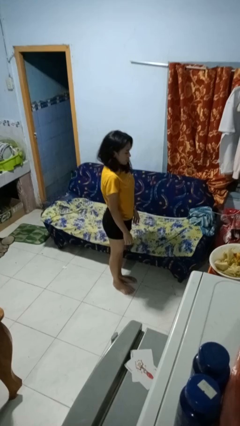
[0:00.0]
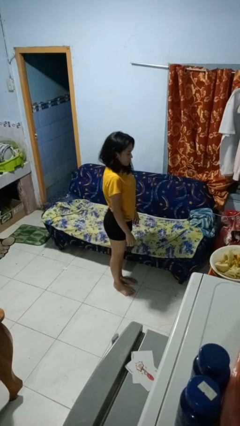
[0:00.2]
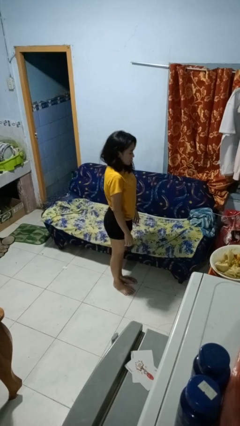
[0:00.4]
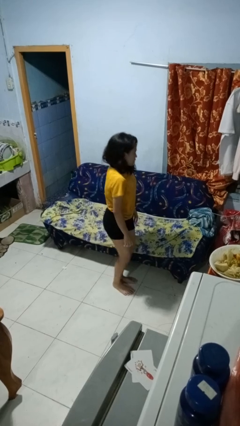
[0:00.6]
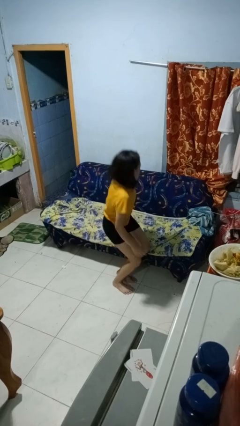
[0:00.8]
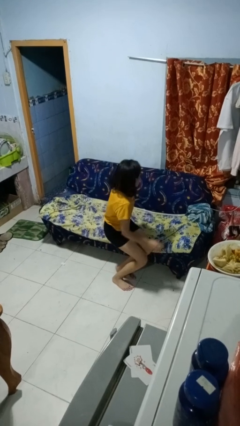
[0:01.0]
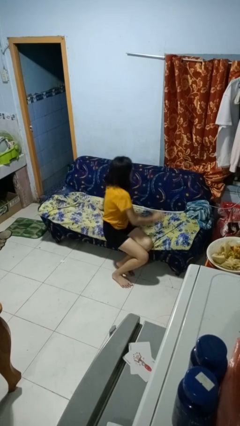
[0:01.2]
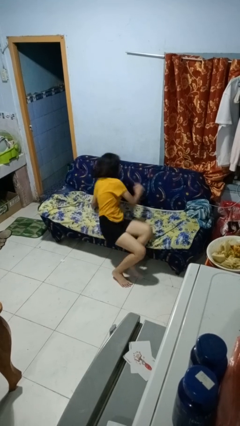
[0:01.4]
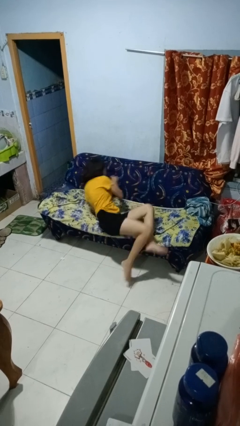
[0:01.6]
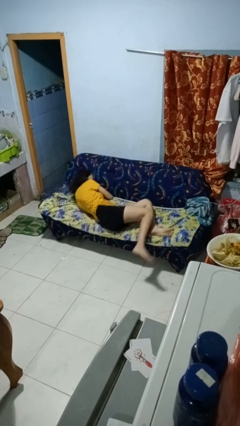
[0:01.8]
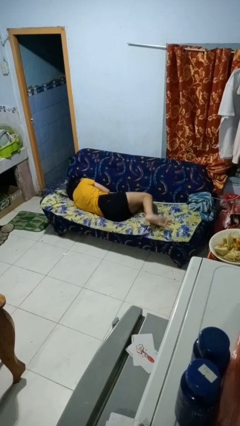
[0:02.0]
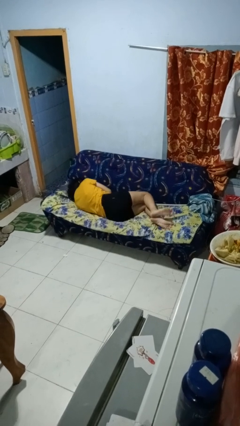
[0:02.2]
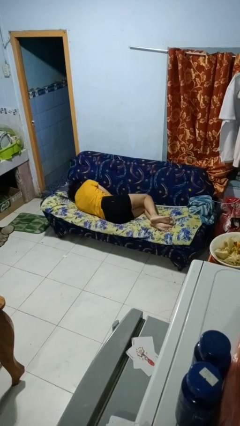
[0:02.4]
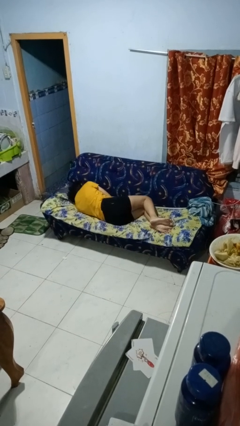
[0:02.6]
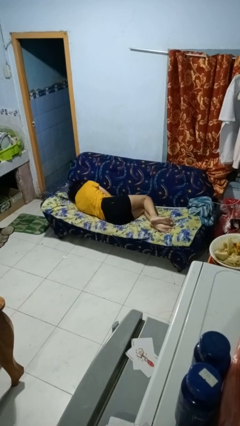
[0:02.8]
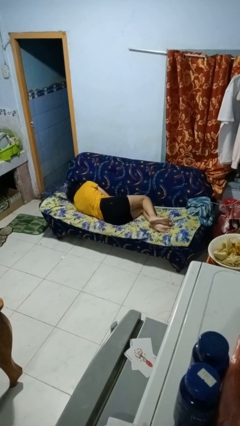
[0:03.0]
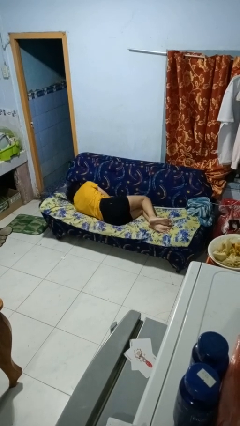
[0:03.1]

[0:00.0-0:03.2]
person lies down on couch

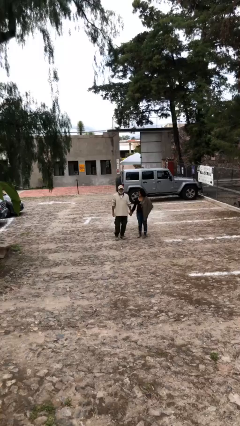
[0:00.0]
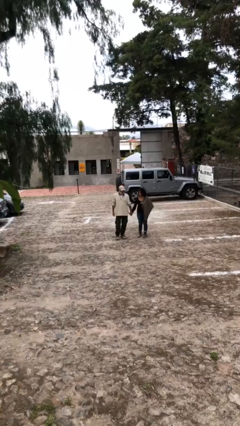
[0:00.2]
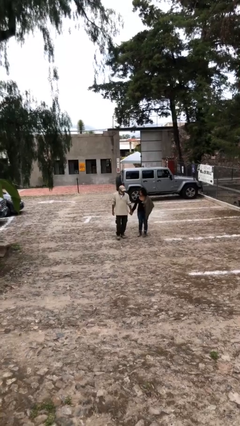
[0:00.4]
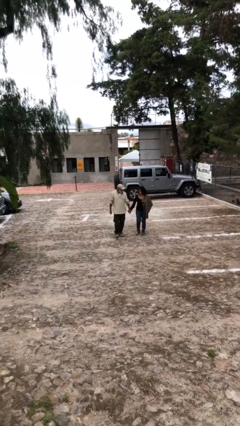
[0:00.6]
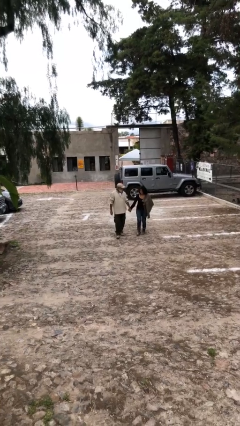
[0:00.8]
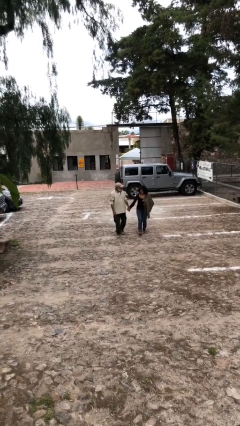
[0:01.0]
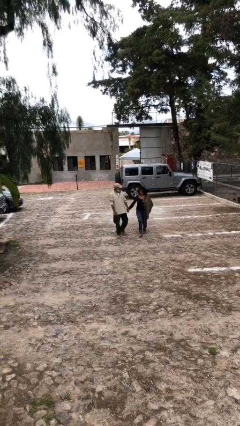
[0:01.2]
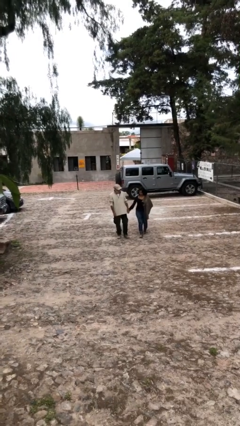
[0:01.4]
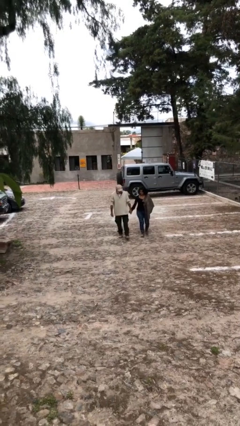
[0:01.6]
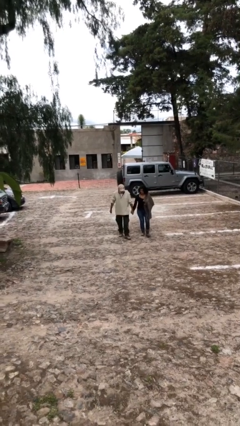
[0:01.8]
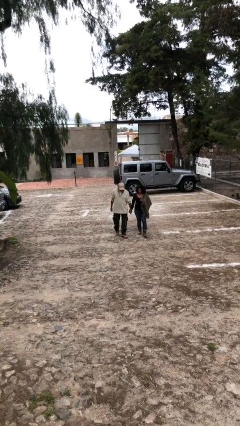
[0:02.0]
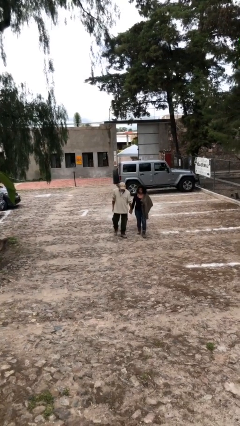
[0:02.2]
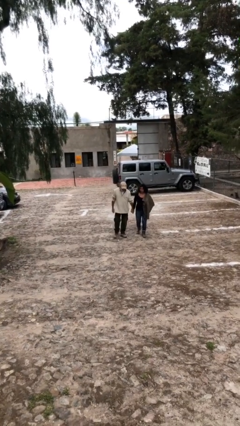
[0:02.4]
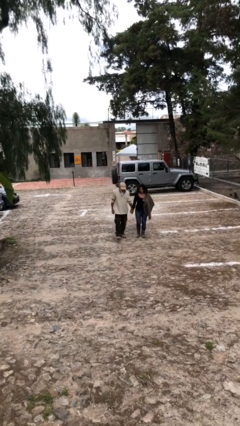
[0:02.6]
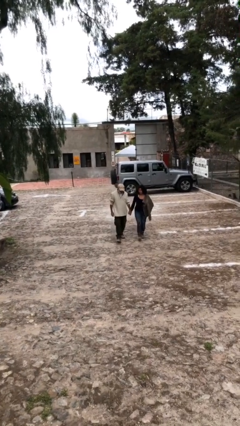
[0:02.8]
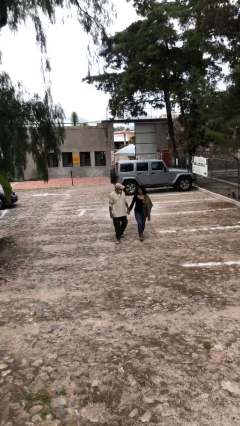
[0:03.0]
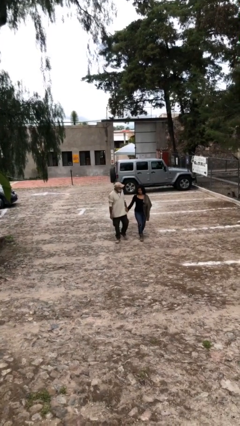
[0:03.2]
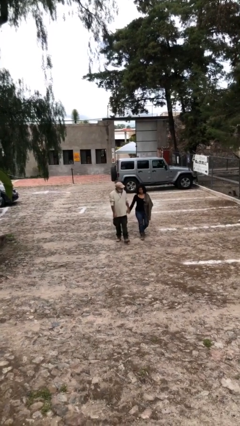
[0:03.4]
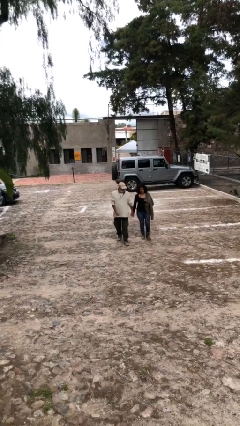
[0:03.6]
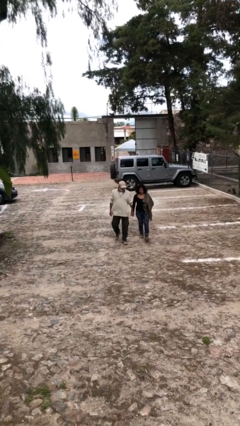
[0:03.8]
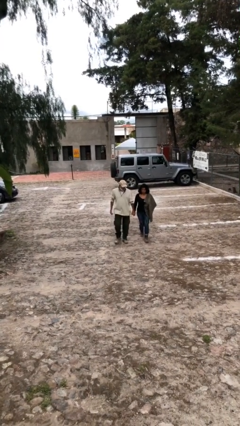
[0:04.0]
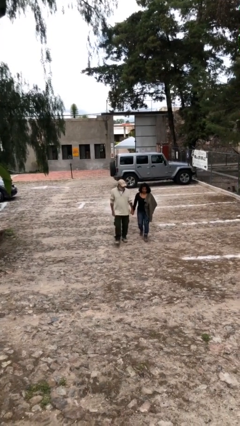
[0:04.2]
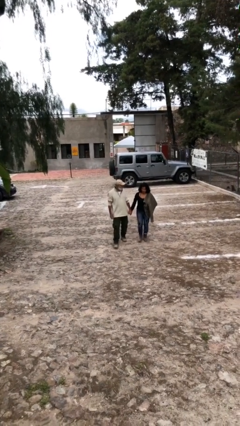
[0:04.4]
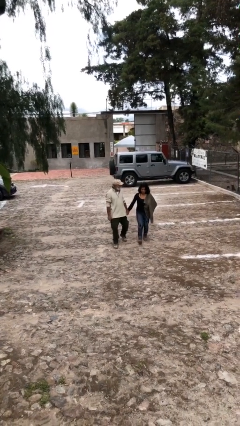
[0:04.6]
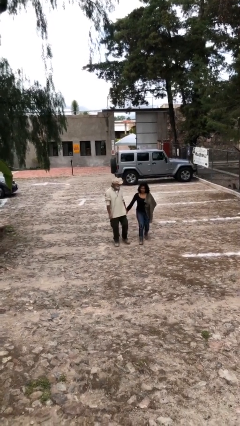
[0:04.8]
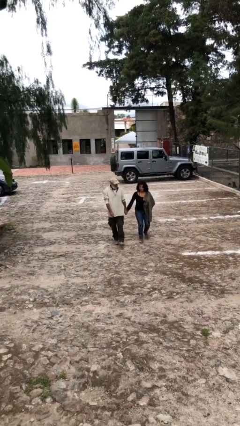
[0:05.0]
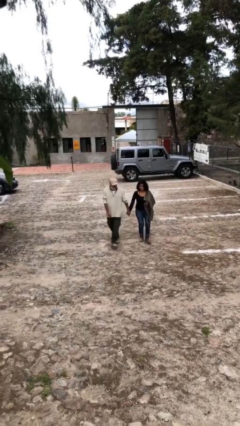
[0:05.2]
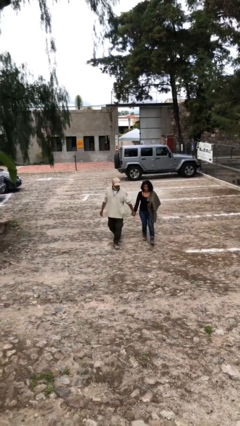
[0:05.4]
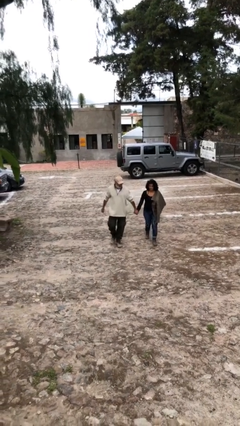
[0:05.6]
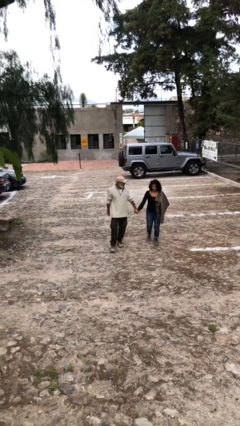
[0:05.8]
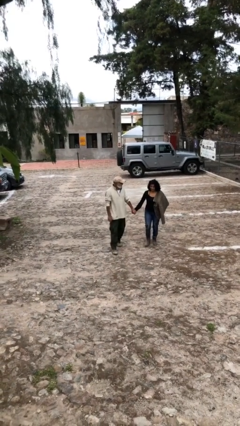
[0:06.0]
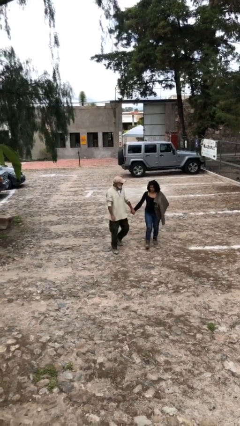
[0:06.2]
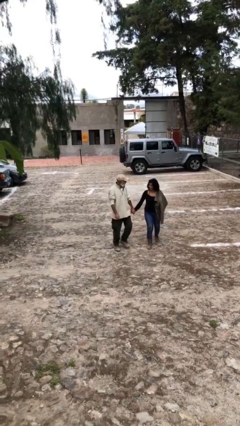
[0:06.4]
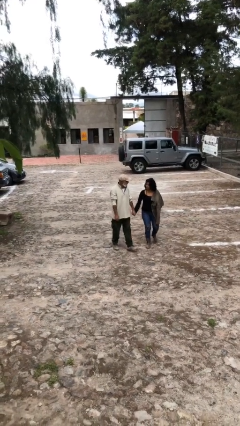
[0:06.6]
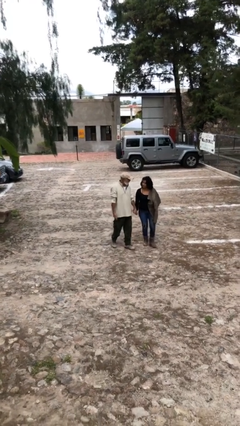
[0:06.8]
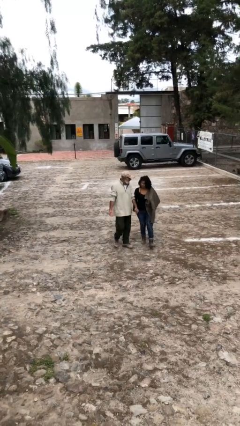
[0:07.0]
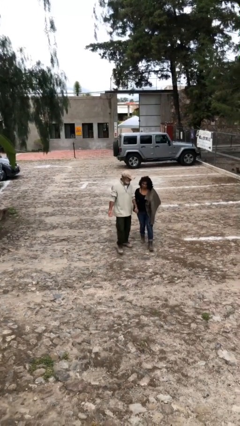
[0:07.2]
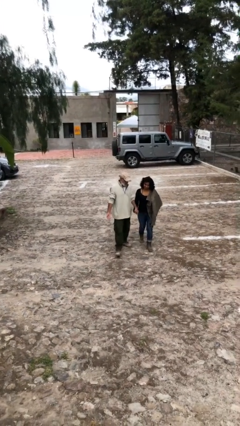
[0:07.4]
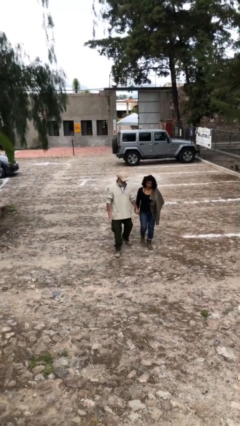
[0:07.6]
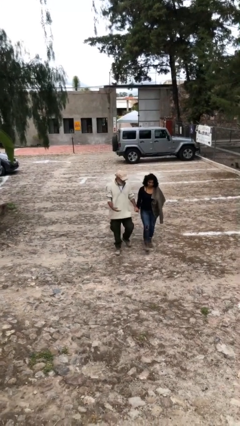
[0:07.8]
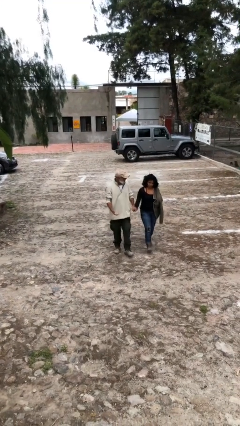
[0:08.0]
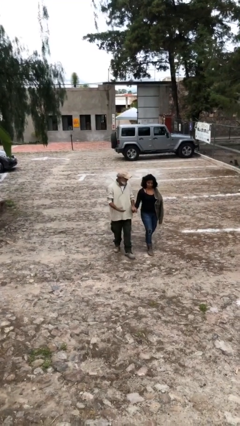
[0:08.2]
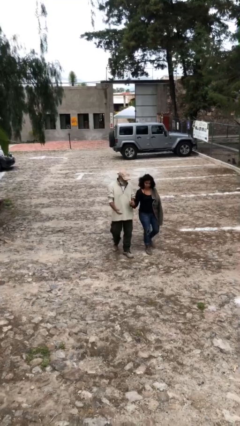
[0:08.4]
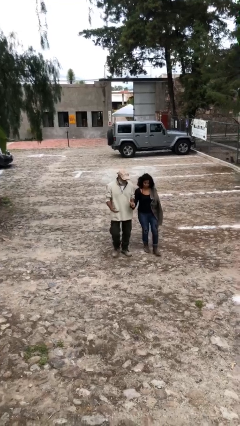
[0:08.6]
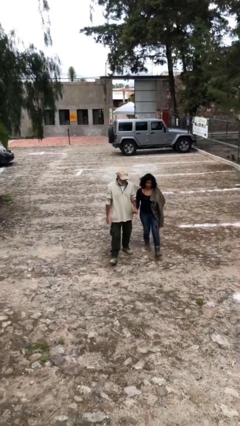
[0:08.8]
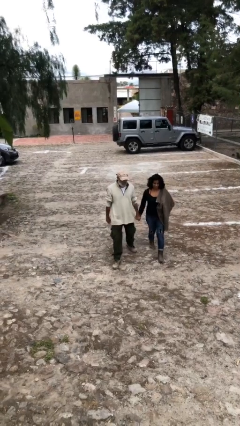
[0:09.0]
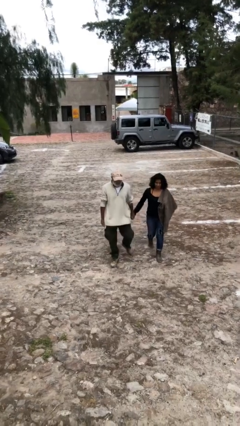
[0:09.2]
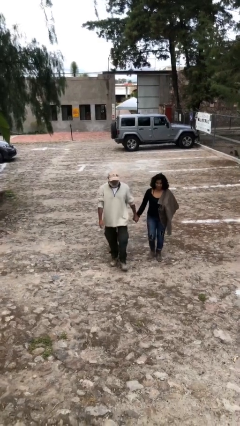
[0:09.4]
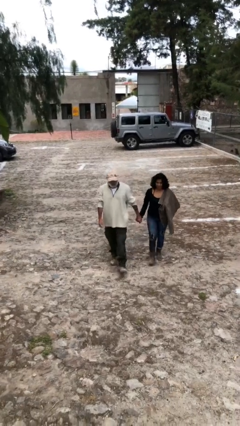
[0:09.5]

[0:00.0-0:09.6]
person holds hand

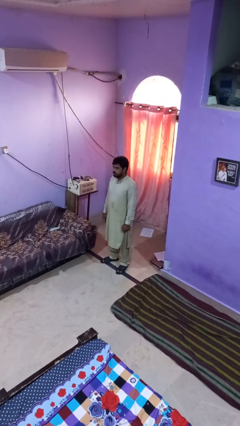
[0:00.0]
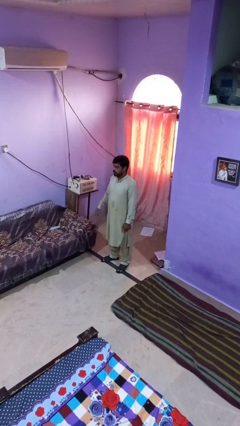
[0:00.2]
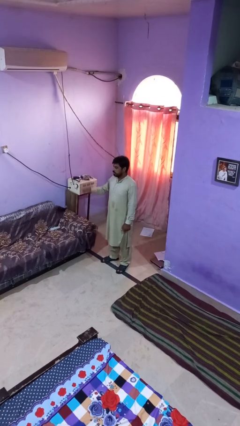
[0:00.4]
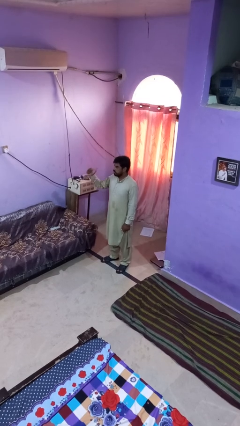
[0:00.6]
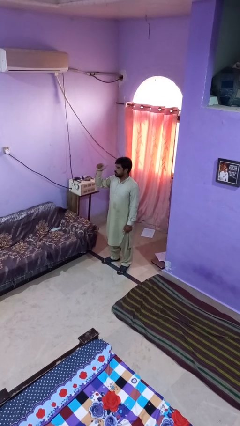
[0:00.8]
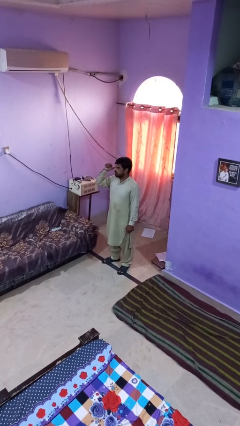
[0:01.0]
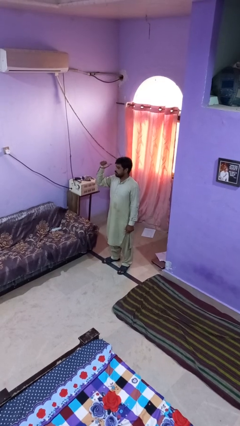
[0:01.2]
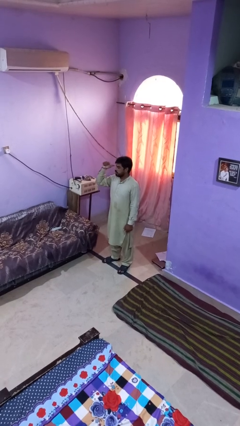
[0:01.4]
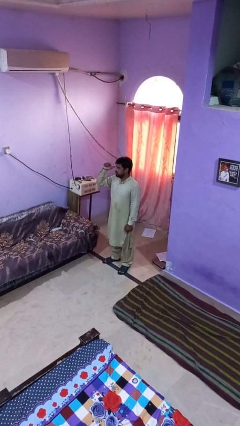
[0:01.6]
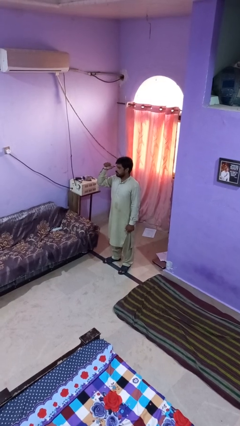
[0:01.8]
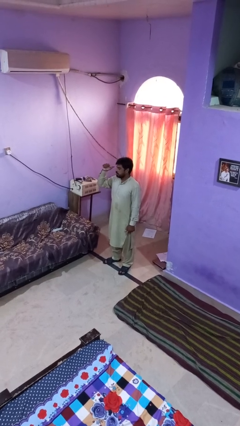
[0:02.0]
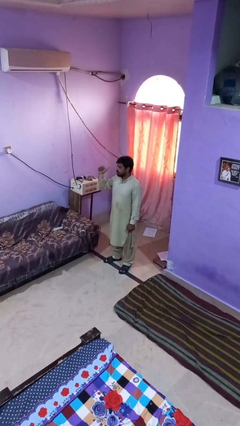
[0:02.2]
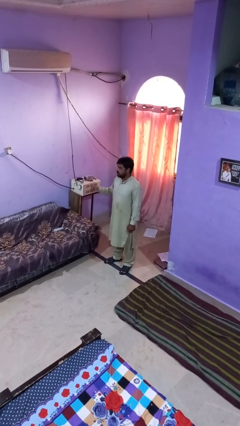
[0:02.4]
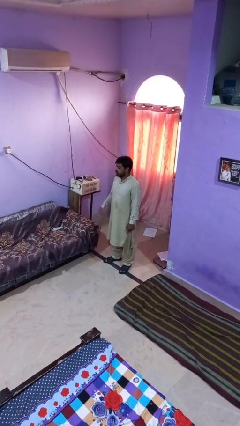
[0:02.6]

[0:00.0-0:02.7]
person gestures behind me

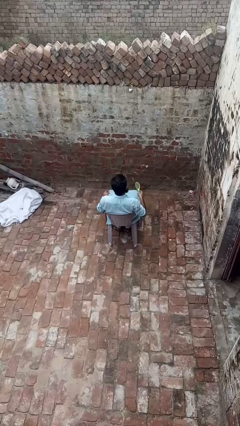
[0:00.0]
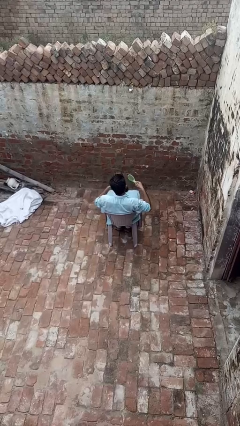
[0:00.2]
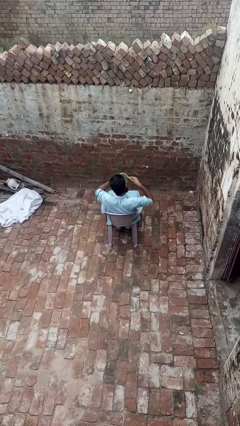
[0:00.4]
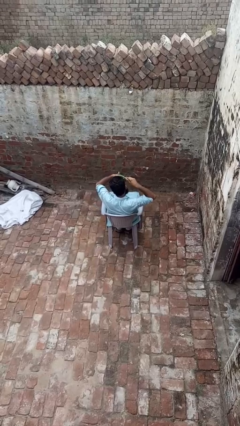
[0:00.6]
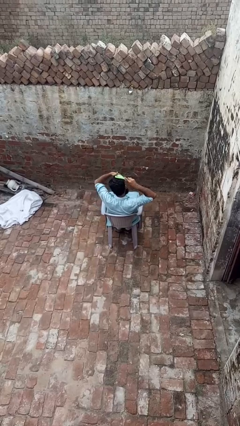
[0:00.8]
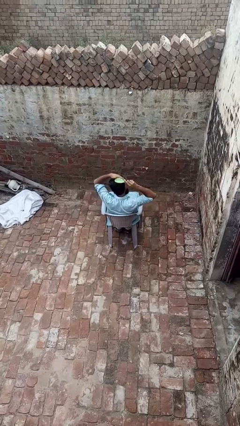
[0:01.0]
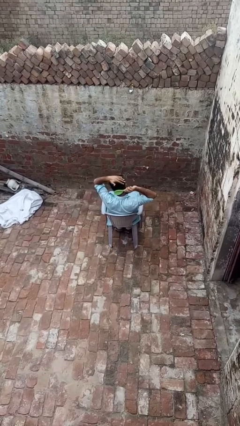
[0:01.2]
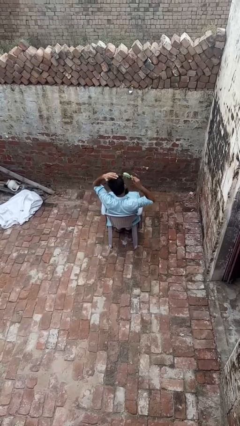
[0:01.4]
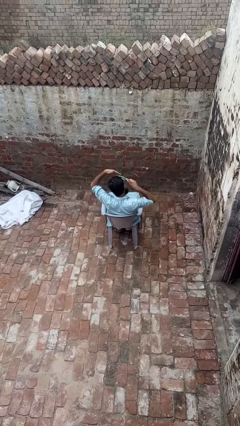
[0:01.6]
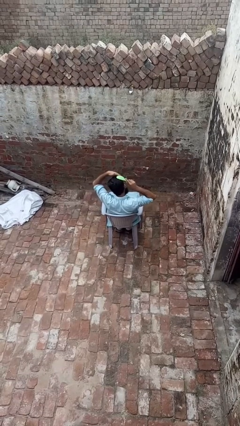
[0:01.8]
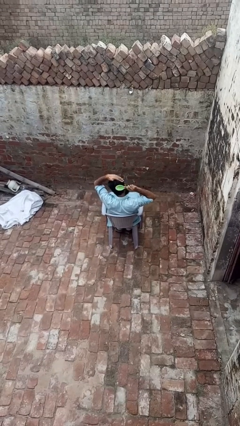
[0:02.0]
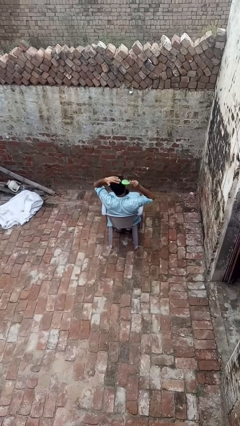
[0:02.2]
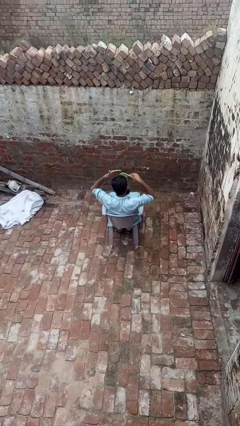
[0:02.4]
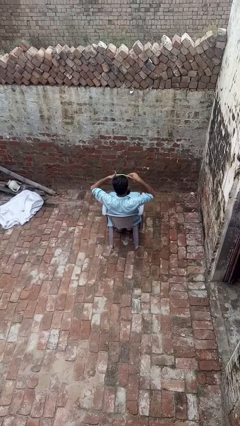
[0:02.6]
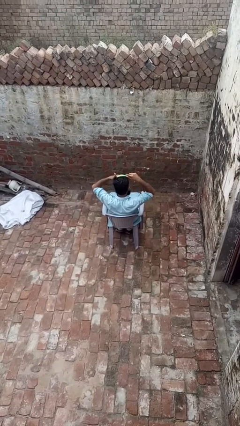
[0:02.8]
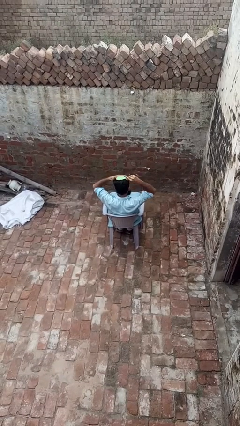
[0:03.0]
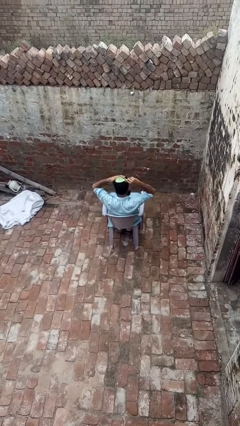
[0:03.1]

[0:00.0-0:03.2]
person brushes hair
